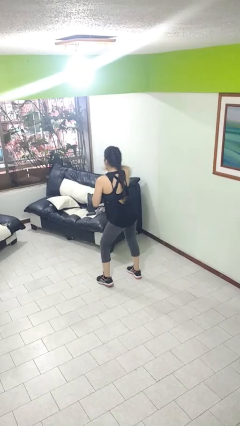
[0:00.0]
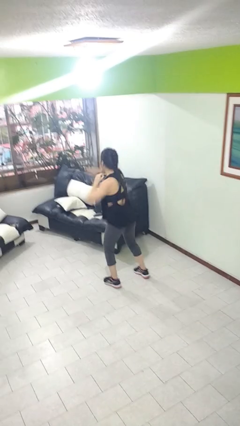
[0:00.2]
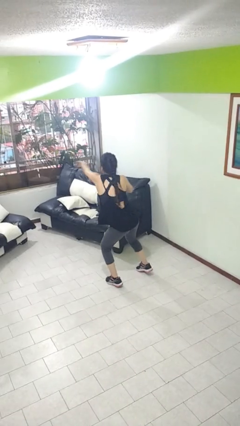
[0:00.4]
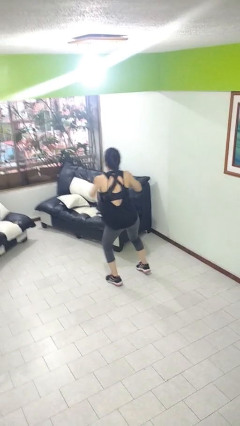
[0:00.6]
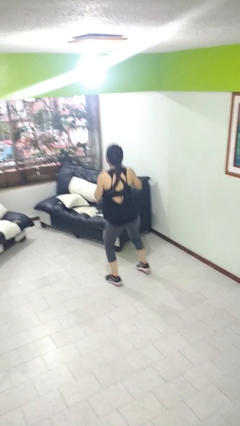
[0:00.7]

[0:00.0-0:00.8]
person punches

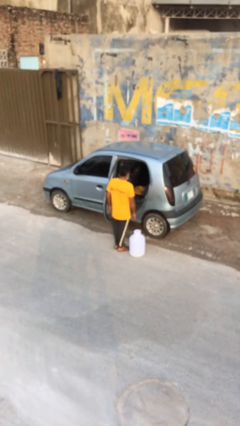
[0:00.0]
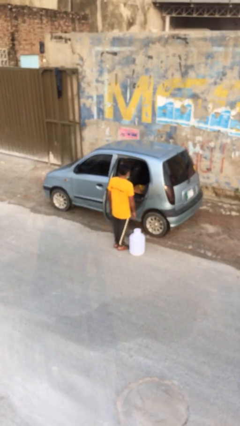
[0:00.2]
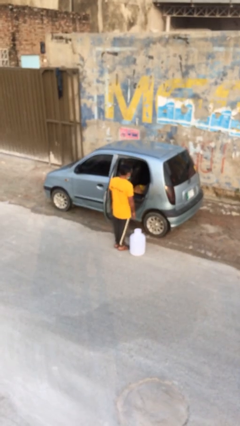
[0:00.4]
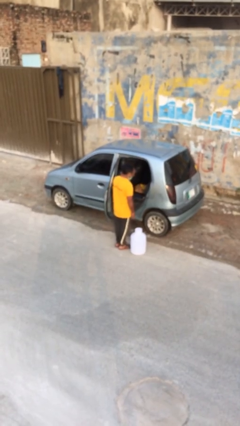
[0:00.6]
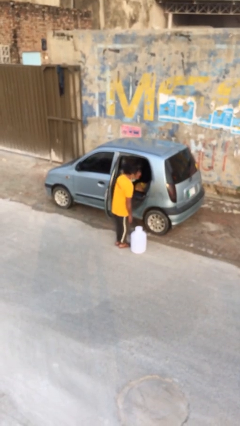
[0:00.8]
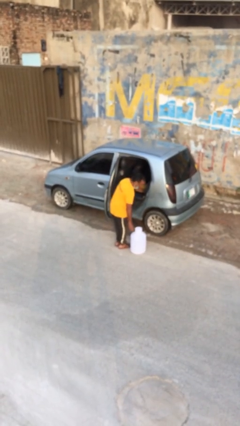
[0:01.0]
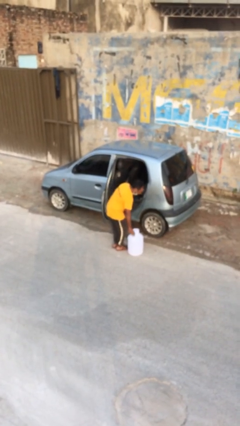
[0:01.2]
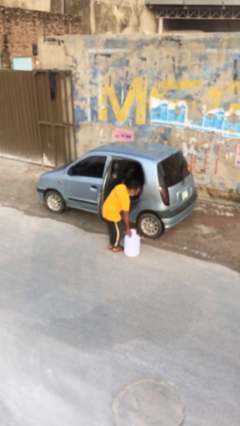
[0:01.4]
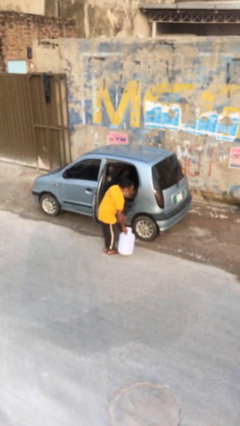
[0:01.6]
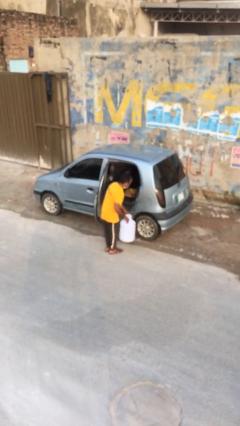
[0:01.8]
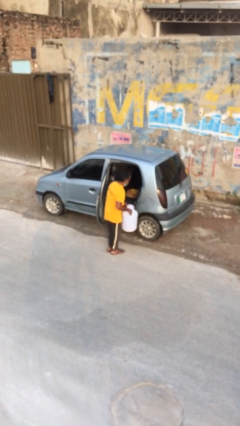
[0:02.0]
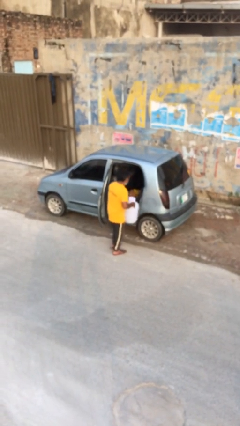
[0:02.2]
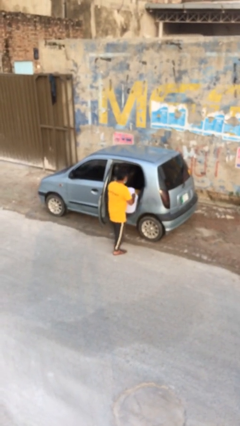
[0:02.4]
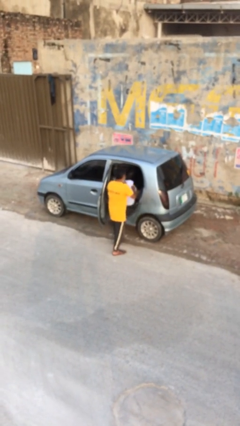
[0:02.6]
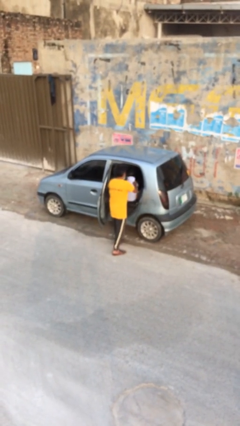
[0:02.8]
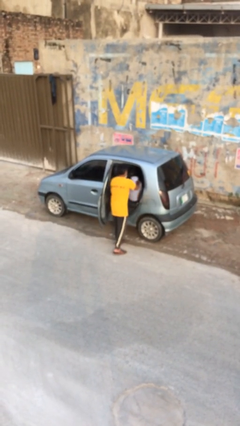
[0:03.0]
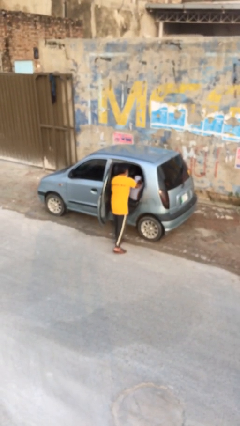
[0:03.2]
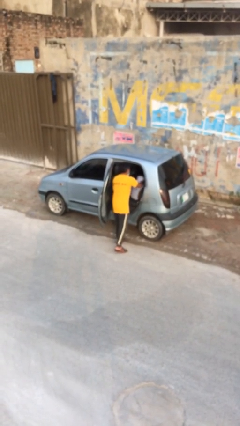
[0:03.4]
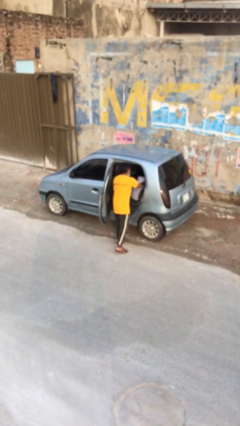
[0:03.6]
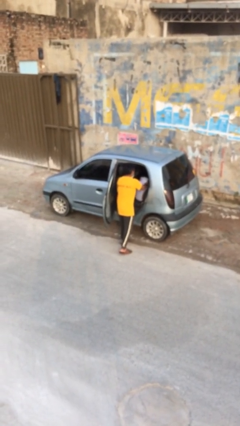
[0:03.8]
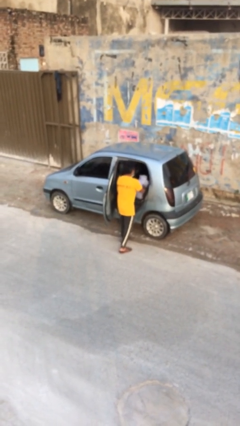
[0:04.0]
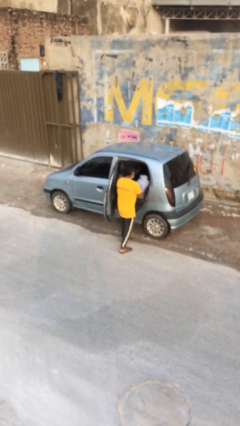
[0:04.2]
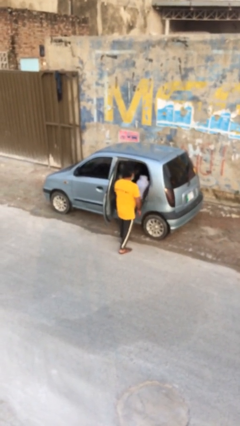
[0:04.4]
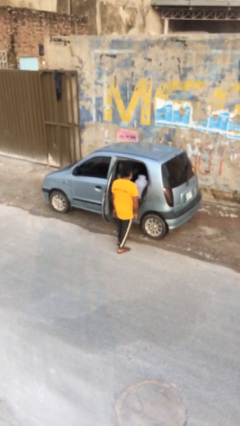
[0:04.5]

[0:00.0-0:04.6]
person loads car

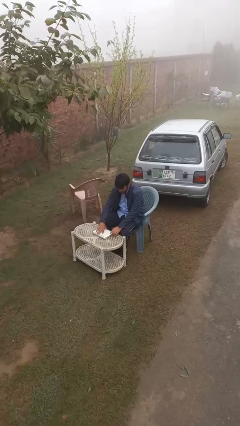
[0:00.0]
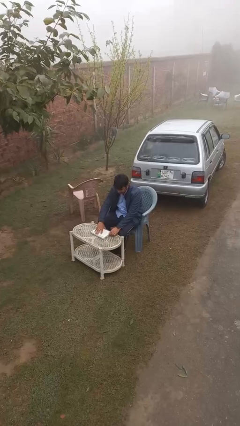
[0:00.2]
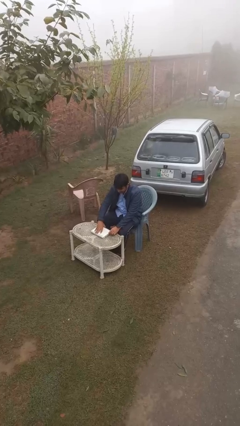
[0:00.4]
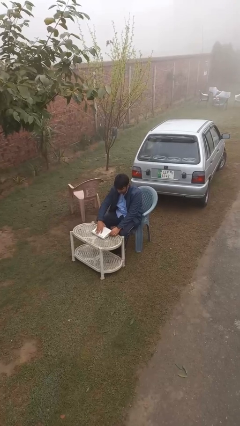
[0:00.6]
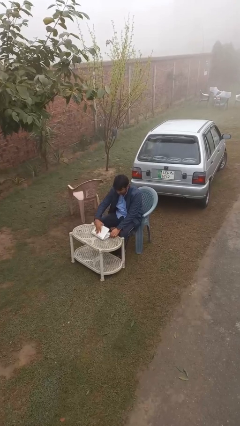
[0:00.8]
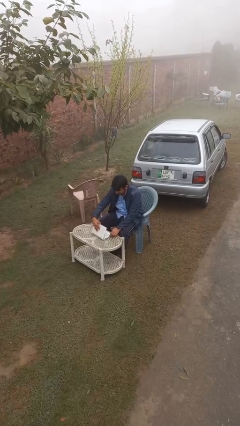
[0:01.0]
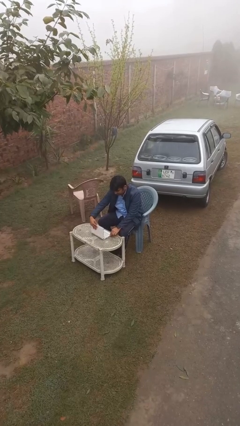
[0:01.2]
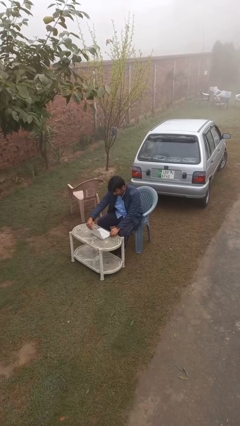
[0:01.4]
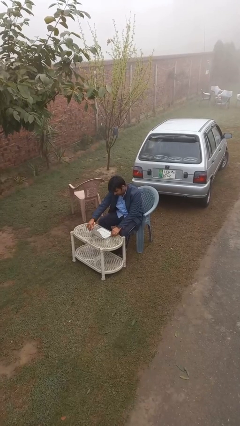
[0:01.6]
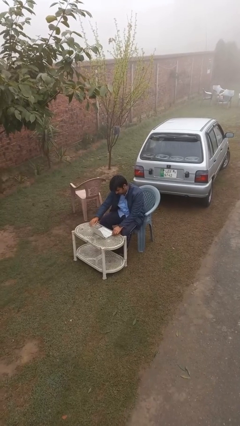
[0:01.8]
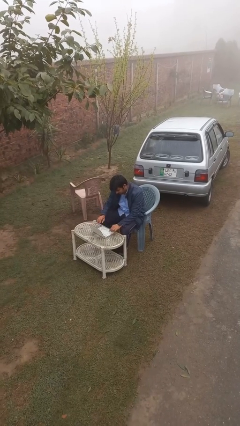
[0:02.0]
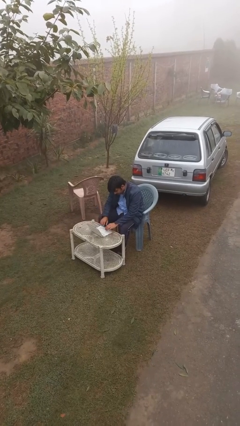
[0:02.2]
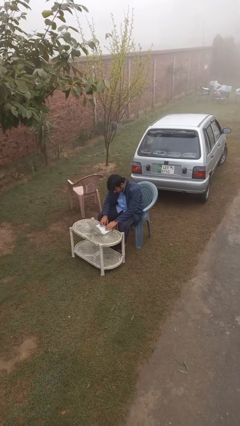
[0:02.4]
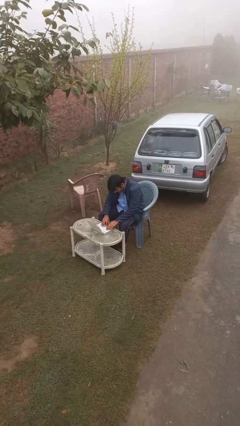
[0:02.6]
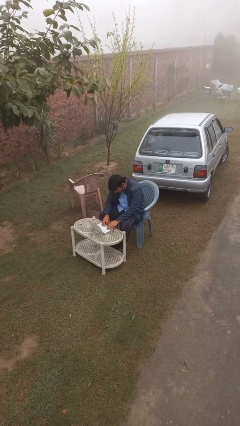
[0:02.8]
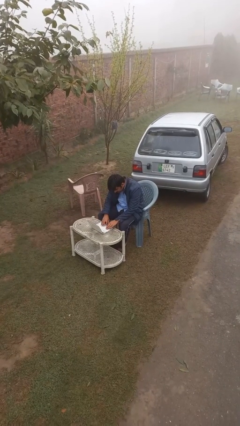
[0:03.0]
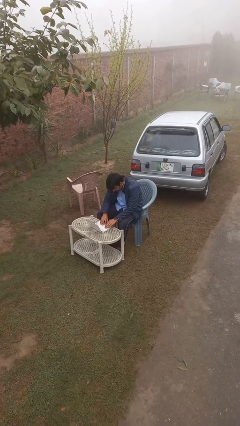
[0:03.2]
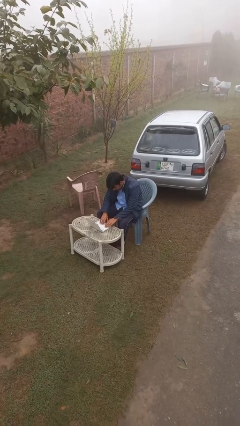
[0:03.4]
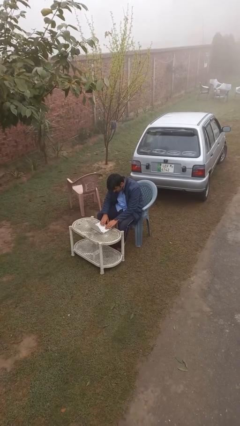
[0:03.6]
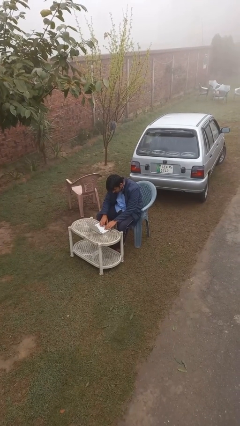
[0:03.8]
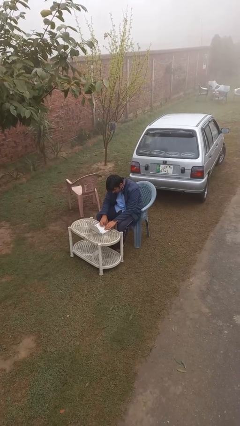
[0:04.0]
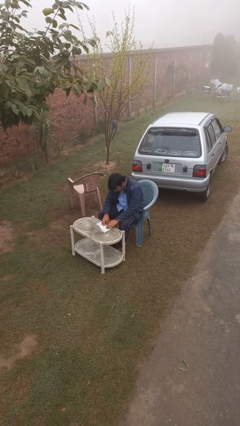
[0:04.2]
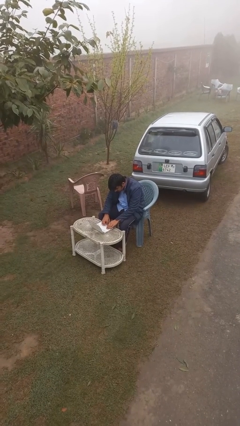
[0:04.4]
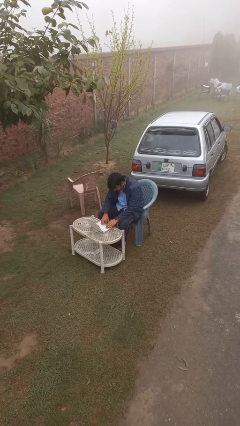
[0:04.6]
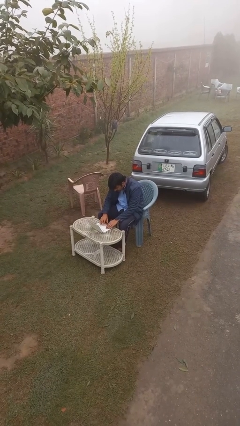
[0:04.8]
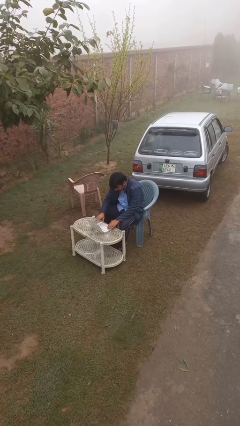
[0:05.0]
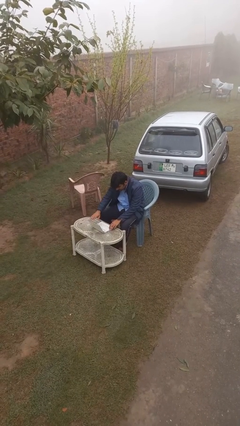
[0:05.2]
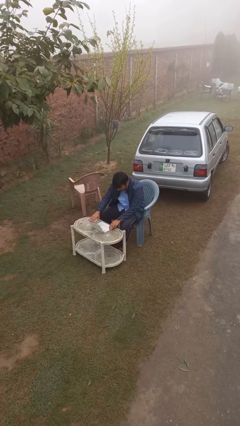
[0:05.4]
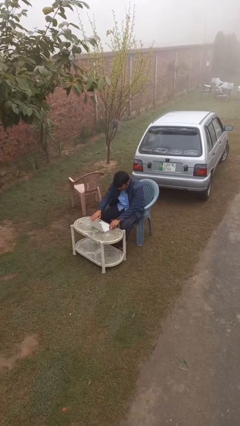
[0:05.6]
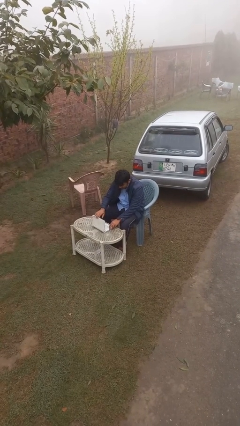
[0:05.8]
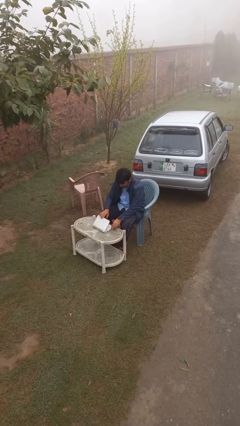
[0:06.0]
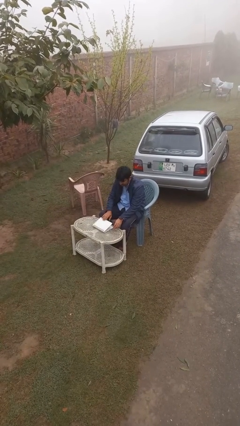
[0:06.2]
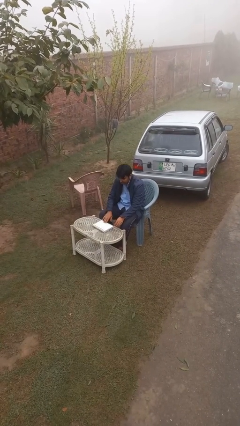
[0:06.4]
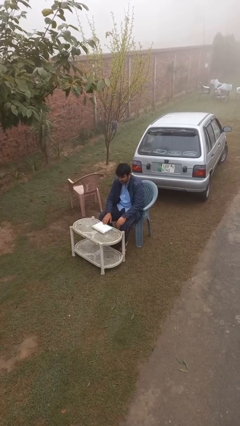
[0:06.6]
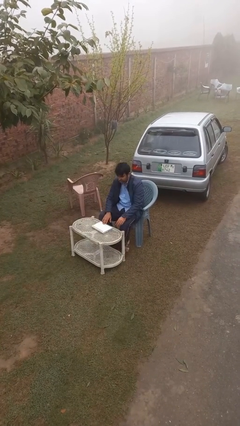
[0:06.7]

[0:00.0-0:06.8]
person interacts with laptop

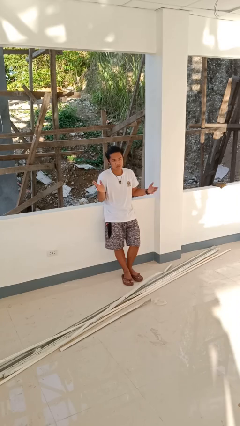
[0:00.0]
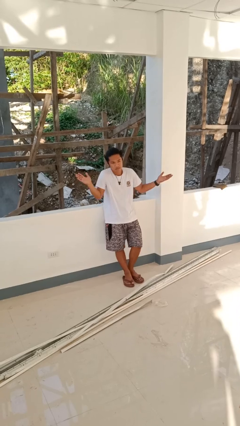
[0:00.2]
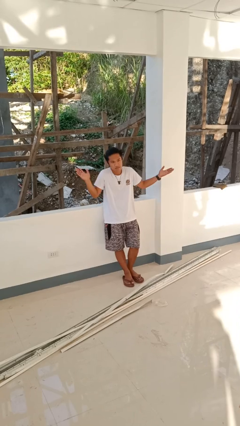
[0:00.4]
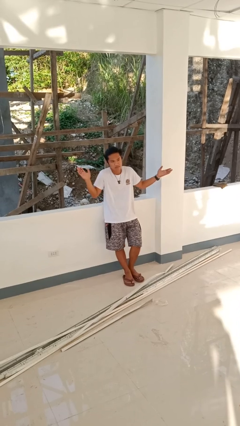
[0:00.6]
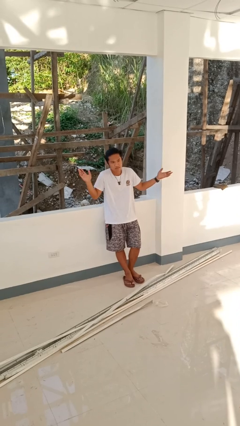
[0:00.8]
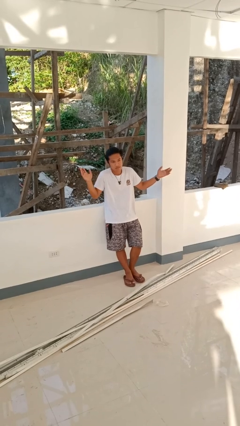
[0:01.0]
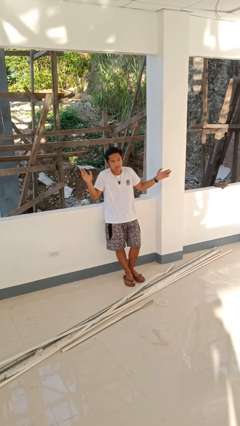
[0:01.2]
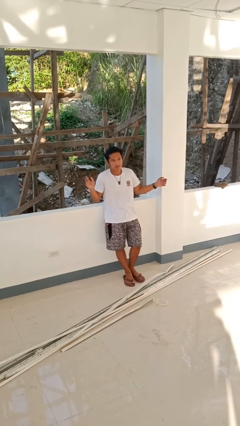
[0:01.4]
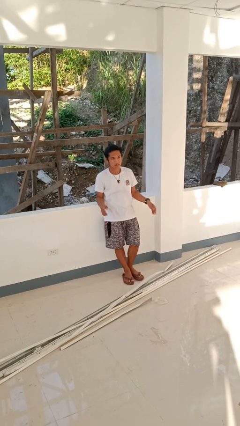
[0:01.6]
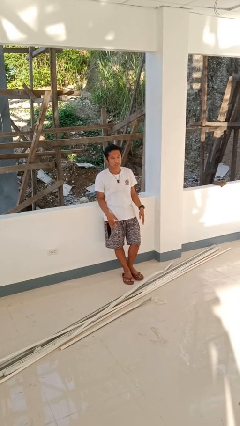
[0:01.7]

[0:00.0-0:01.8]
person shrugs

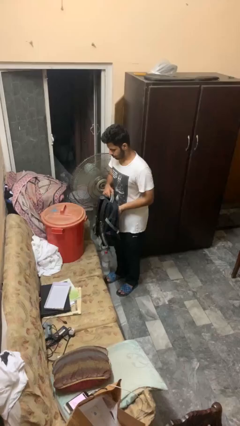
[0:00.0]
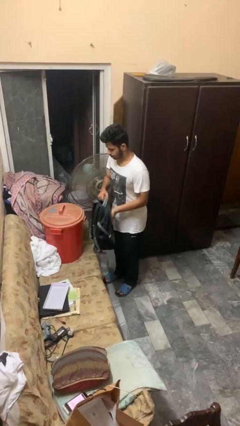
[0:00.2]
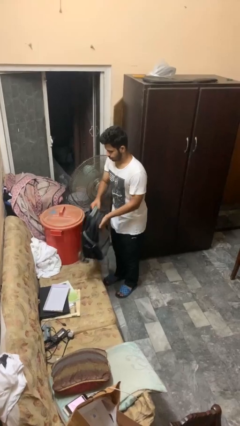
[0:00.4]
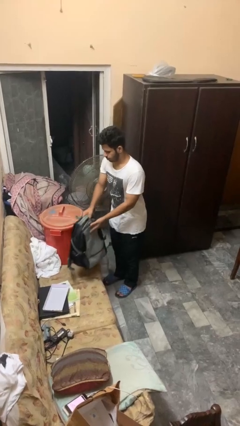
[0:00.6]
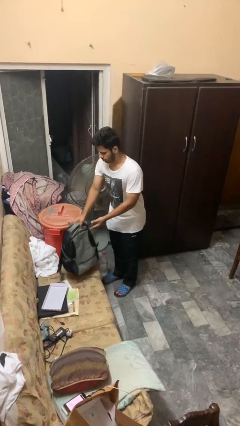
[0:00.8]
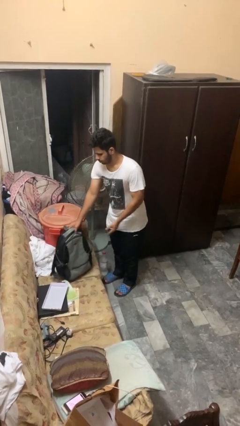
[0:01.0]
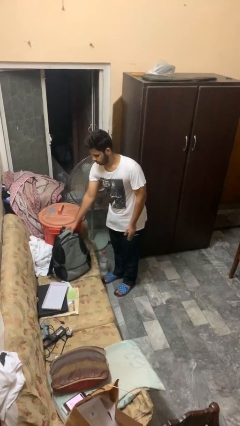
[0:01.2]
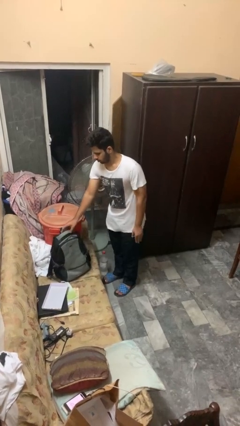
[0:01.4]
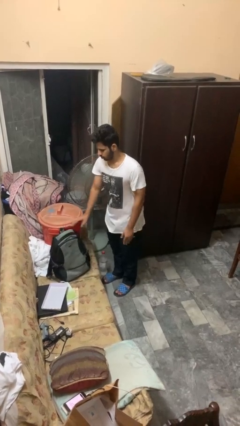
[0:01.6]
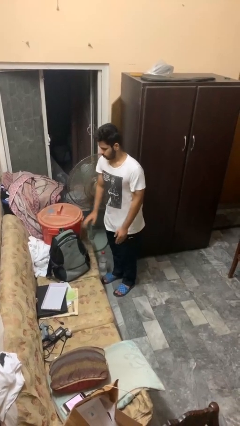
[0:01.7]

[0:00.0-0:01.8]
person puts down object on couch

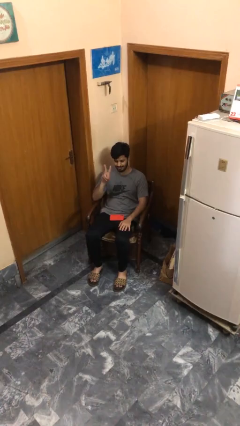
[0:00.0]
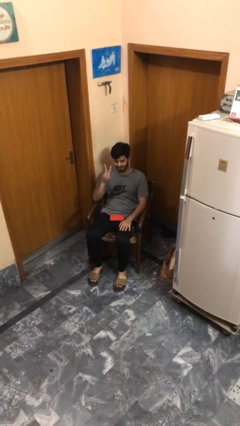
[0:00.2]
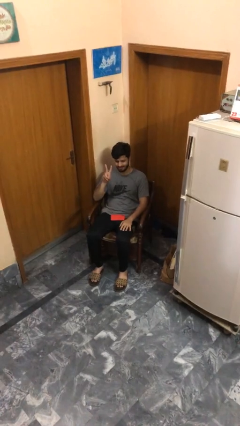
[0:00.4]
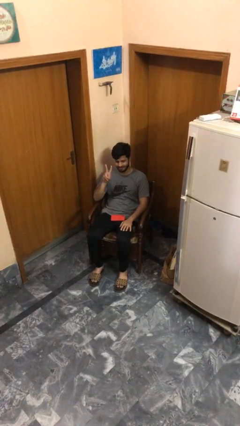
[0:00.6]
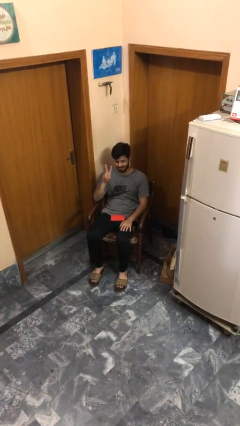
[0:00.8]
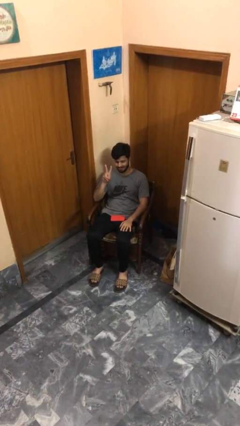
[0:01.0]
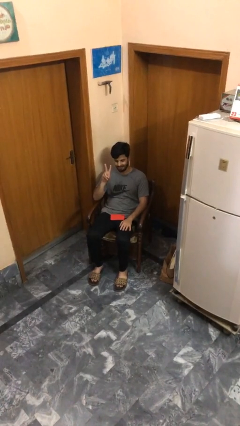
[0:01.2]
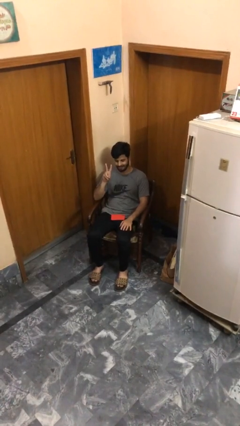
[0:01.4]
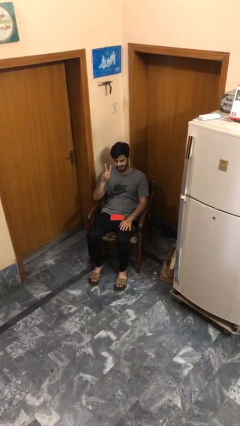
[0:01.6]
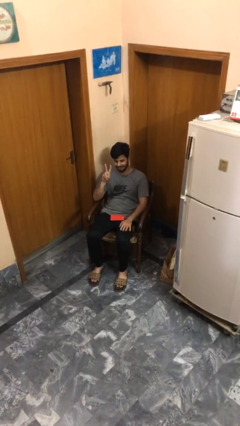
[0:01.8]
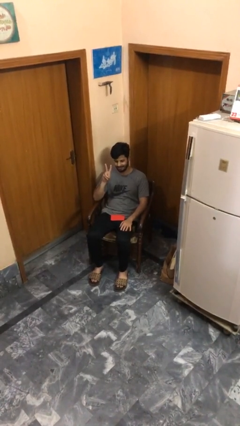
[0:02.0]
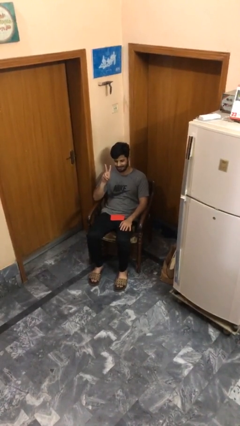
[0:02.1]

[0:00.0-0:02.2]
person gestures peace
